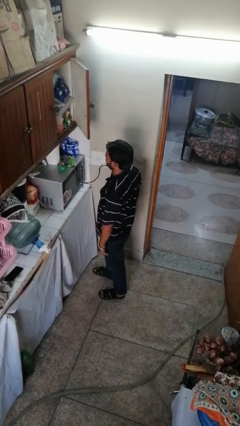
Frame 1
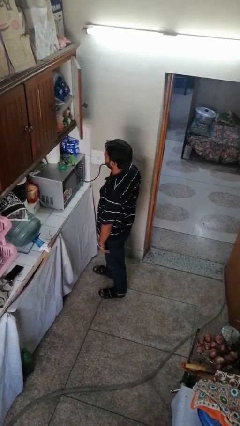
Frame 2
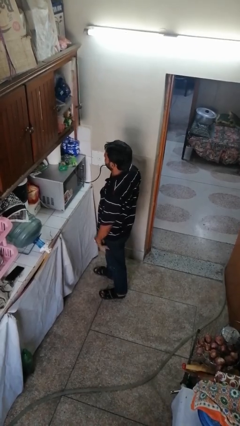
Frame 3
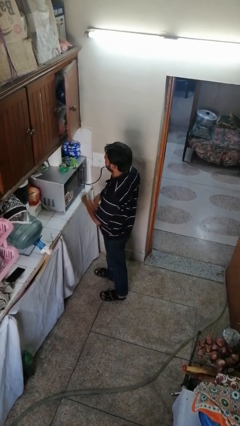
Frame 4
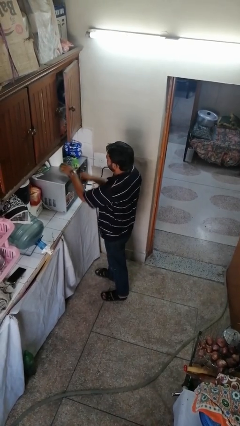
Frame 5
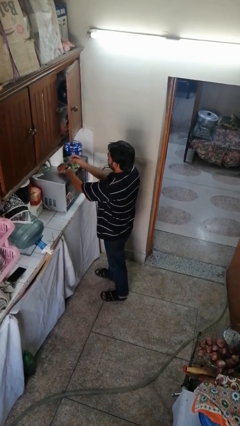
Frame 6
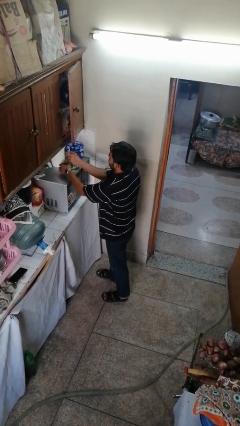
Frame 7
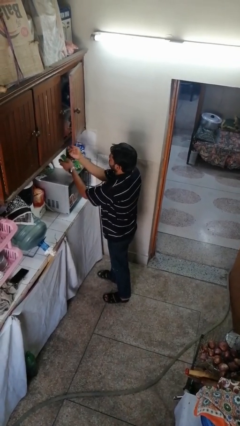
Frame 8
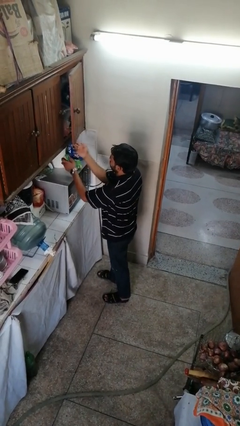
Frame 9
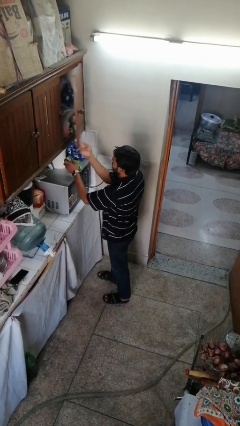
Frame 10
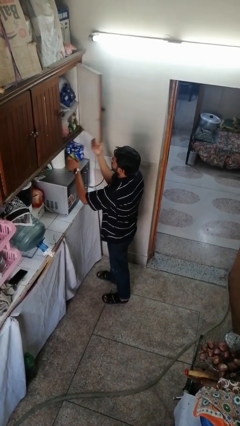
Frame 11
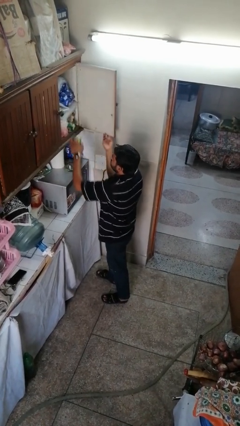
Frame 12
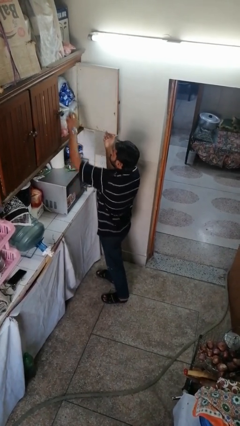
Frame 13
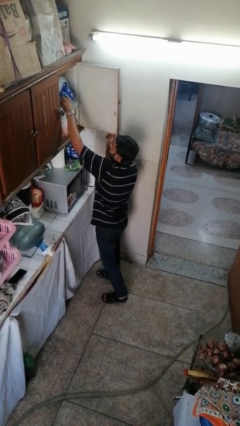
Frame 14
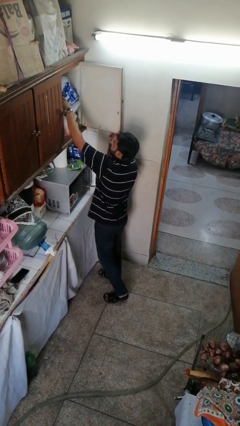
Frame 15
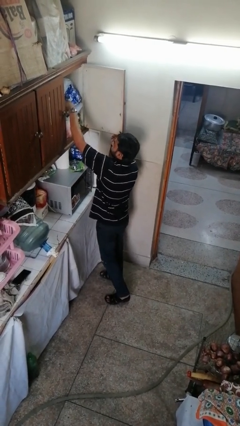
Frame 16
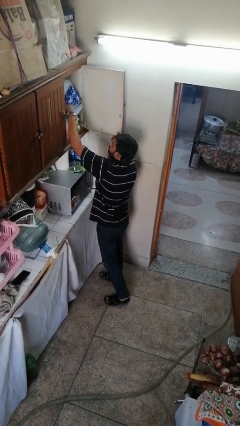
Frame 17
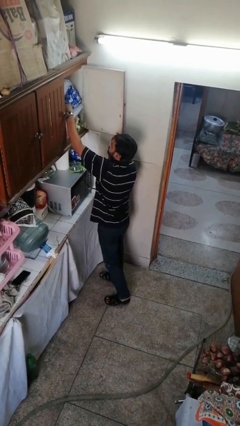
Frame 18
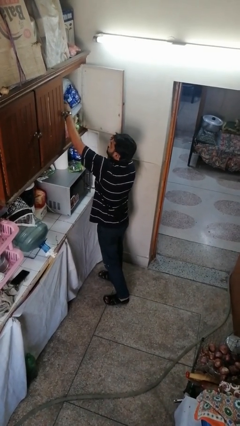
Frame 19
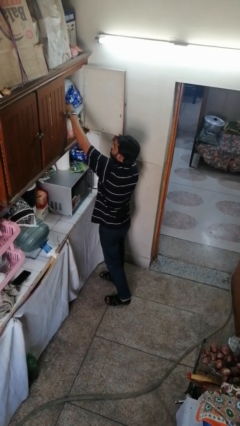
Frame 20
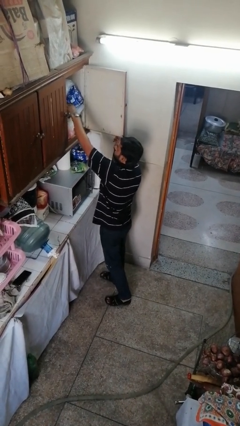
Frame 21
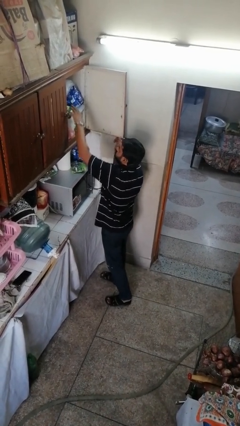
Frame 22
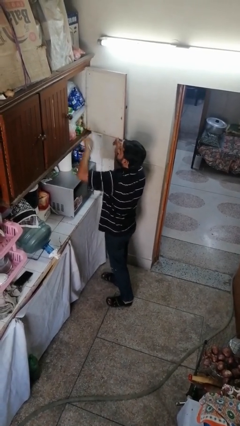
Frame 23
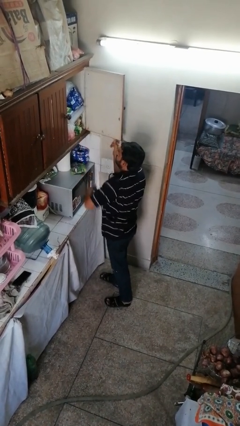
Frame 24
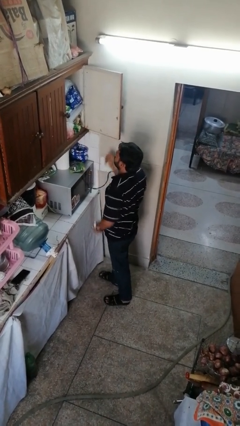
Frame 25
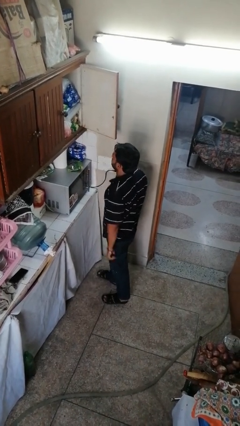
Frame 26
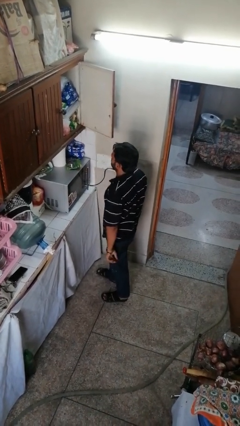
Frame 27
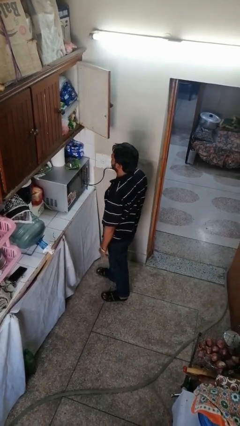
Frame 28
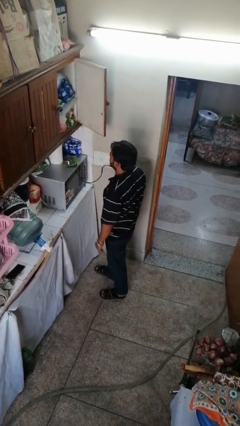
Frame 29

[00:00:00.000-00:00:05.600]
person loads groceries into cabinet

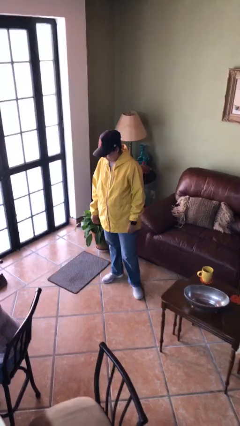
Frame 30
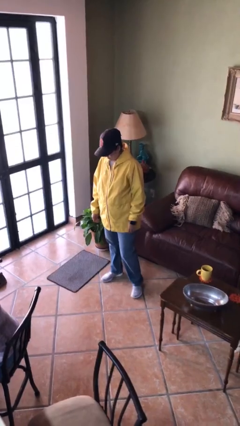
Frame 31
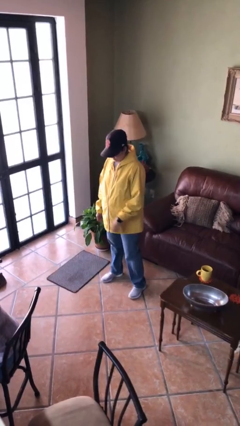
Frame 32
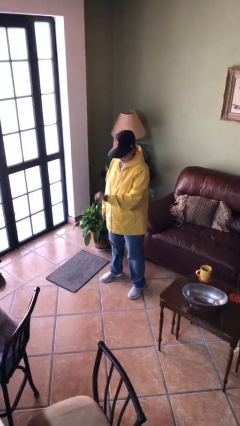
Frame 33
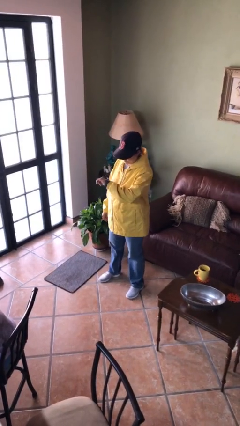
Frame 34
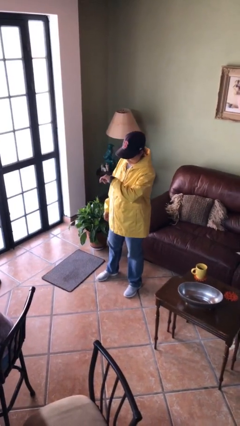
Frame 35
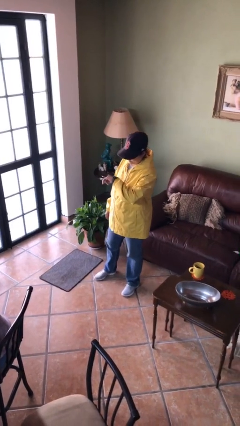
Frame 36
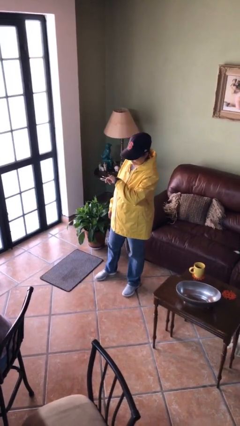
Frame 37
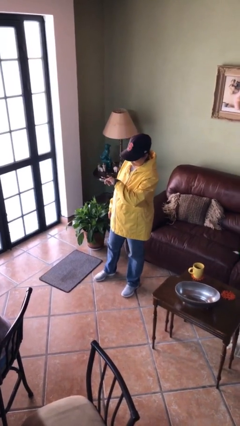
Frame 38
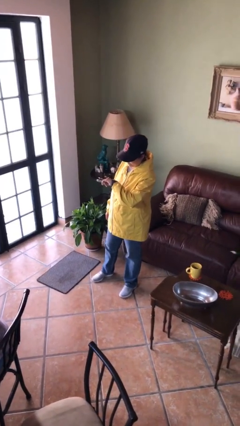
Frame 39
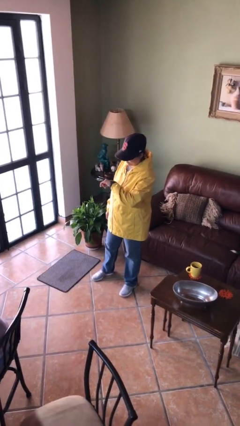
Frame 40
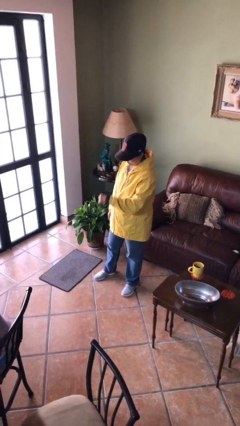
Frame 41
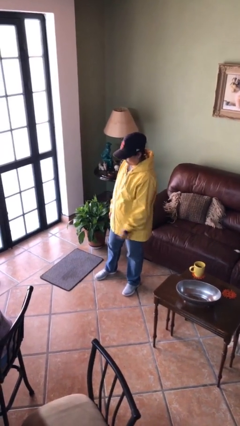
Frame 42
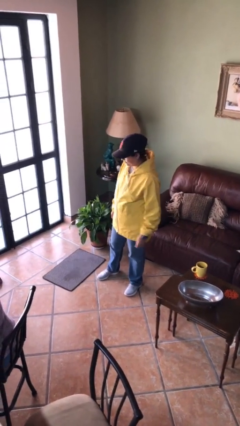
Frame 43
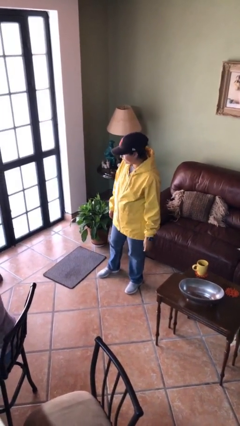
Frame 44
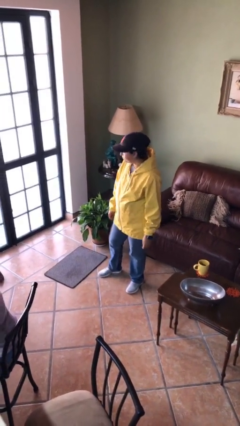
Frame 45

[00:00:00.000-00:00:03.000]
person looks at wristwatch

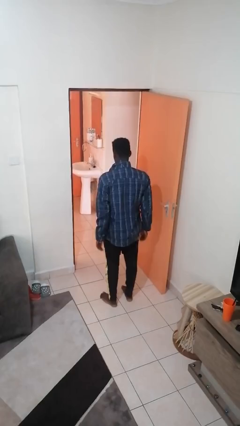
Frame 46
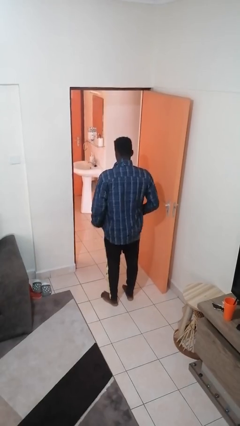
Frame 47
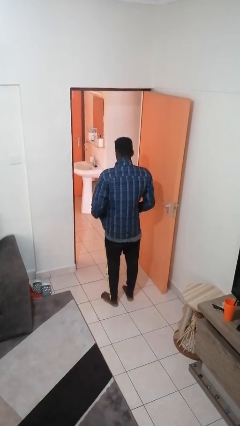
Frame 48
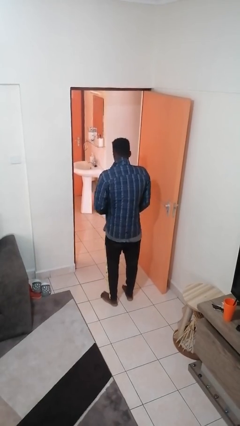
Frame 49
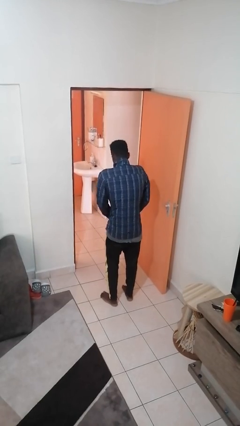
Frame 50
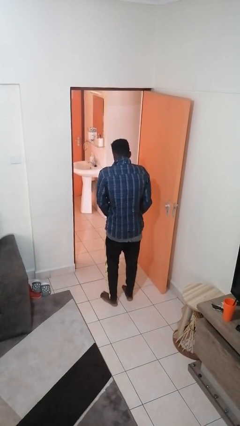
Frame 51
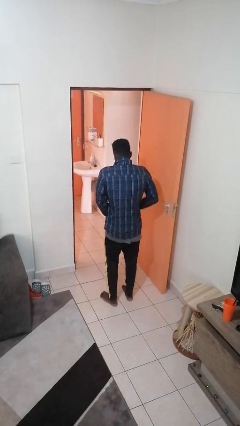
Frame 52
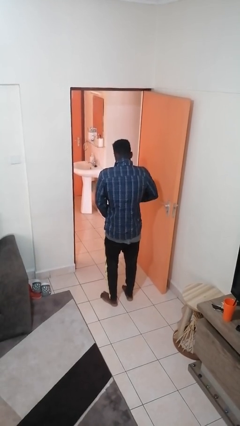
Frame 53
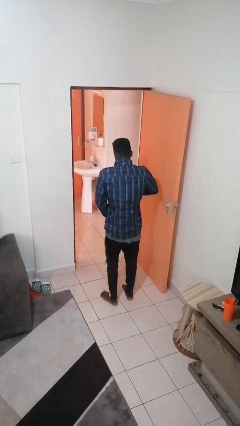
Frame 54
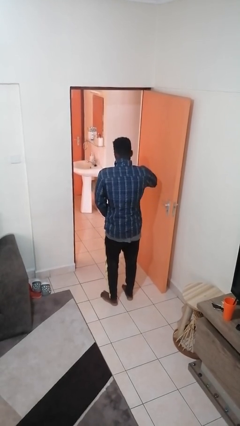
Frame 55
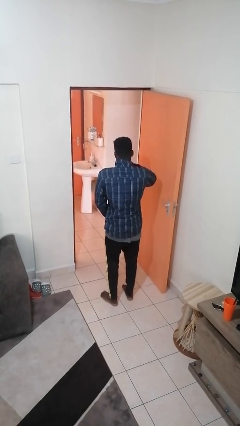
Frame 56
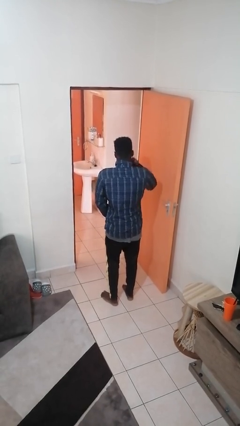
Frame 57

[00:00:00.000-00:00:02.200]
person zips up jacket

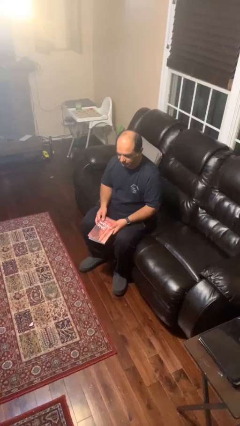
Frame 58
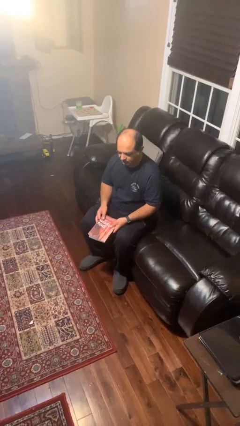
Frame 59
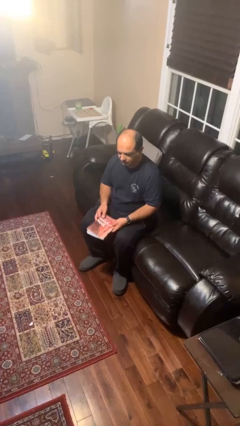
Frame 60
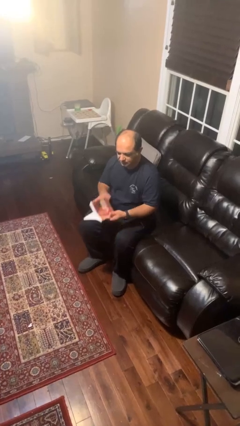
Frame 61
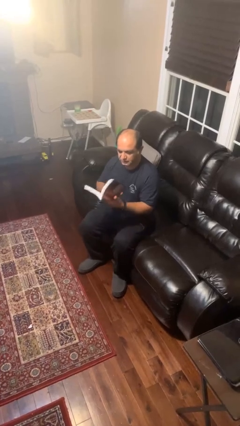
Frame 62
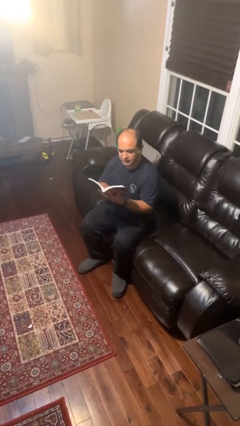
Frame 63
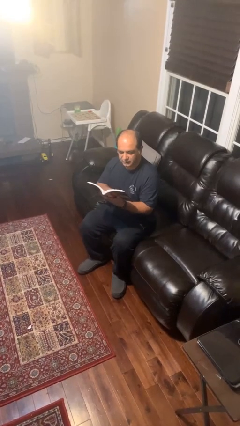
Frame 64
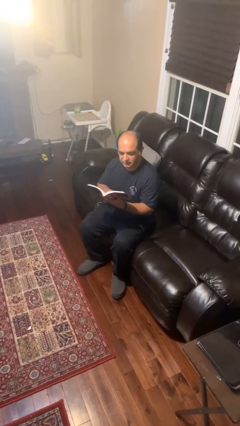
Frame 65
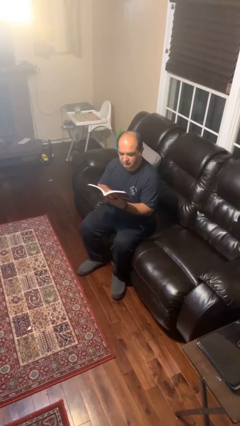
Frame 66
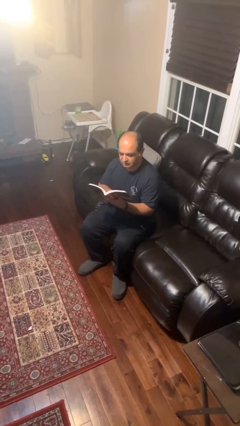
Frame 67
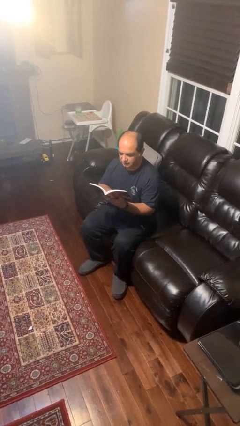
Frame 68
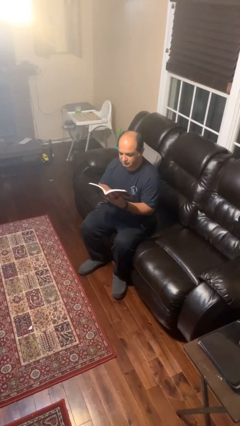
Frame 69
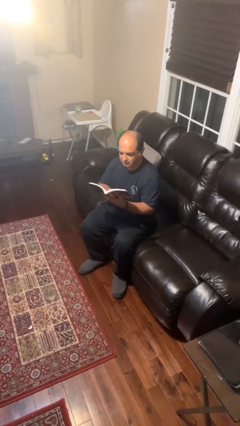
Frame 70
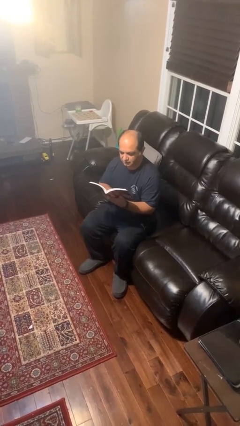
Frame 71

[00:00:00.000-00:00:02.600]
person reads document

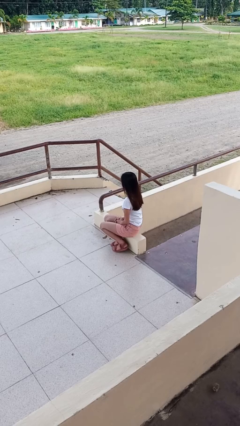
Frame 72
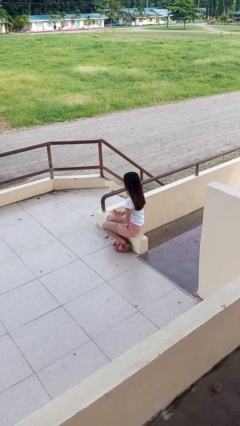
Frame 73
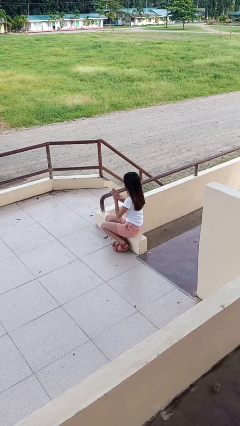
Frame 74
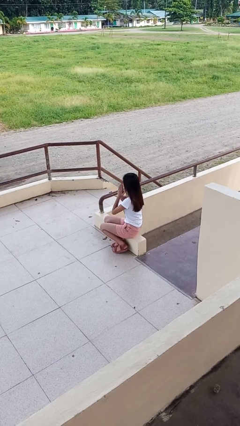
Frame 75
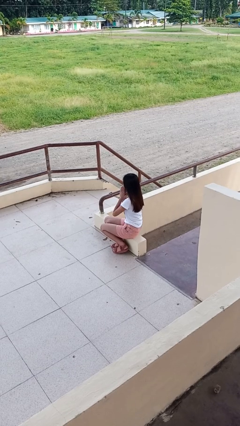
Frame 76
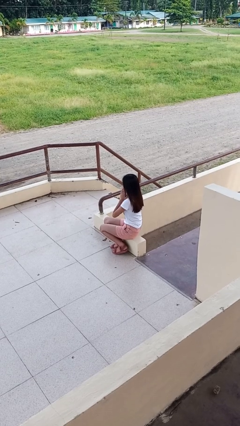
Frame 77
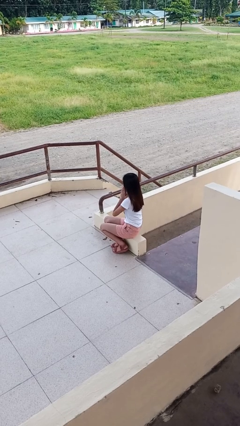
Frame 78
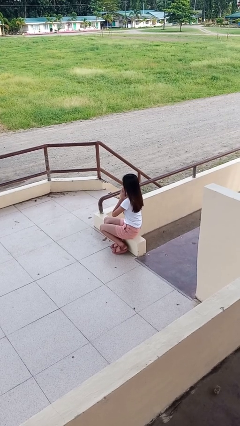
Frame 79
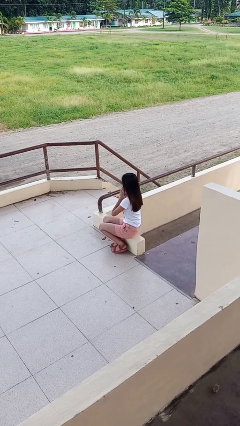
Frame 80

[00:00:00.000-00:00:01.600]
person prays

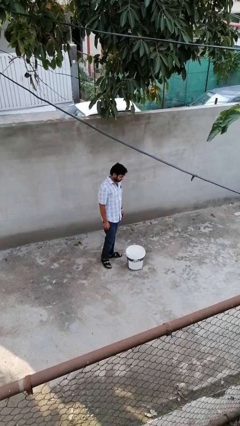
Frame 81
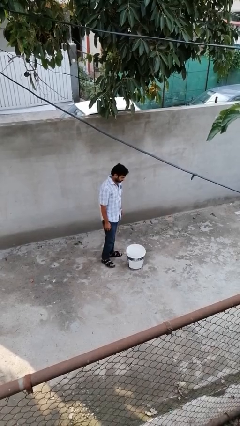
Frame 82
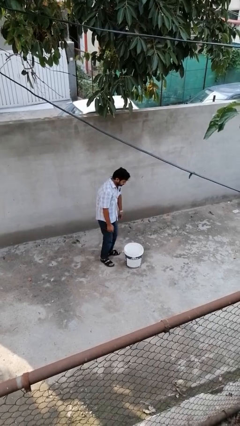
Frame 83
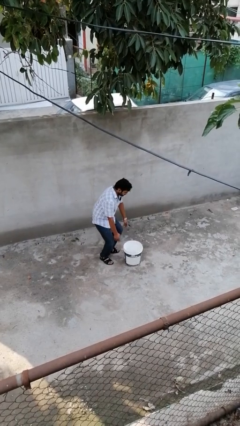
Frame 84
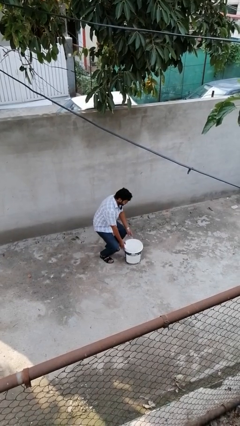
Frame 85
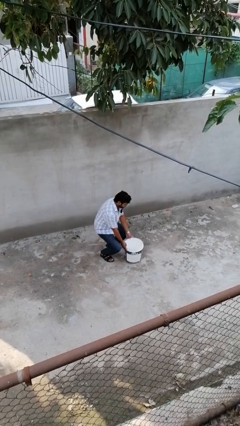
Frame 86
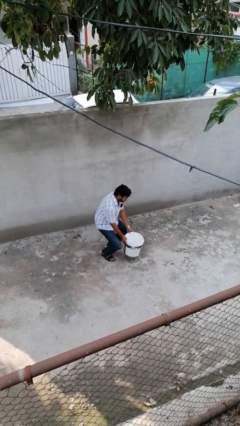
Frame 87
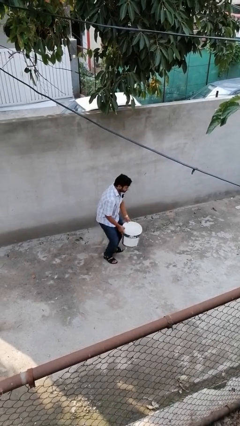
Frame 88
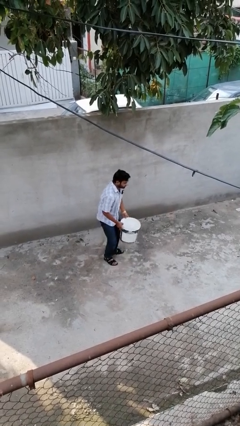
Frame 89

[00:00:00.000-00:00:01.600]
person picks up object from floor

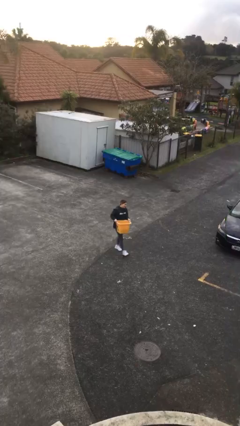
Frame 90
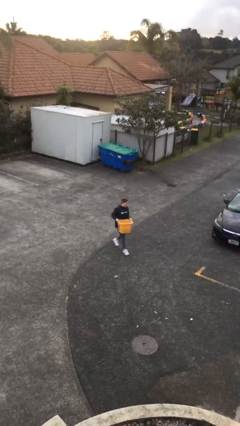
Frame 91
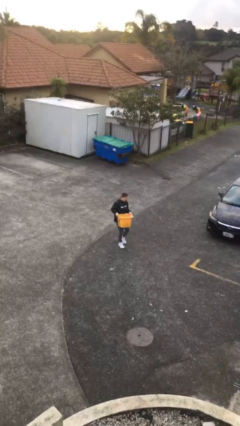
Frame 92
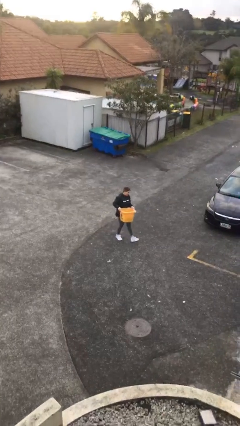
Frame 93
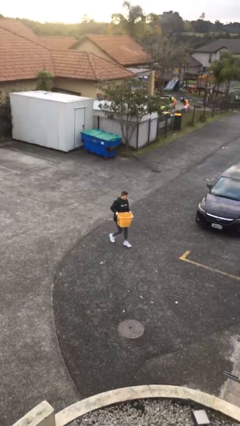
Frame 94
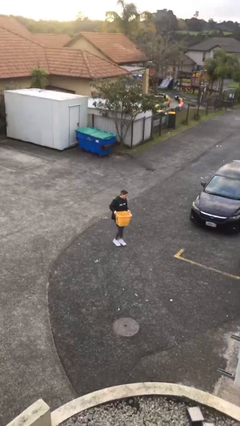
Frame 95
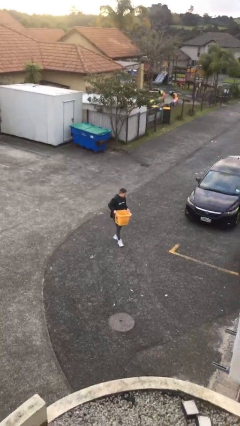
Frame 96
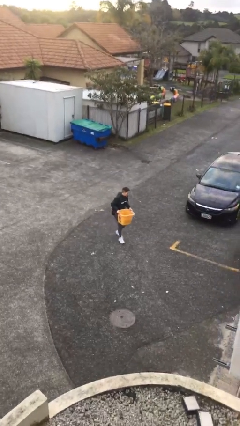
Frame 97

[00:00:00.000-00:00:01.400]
person carries heavy object
